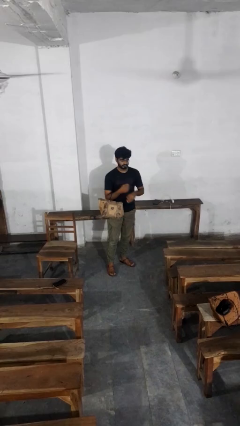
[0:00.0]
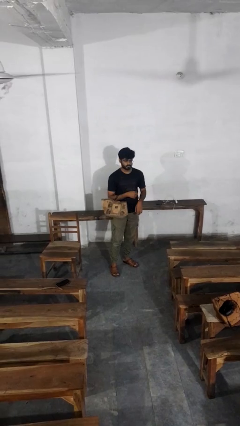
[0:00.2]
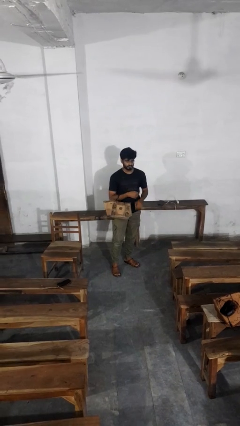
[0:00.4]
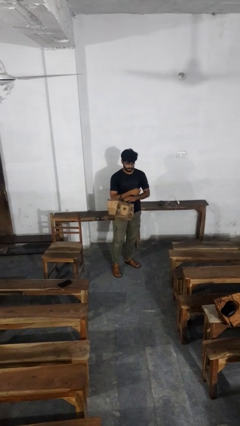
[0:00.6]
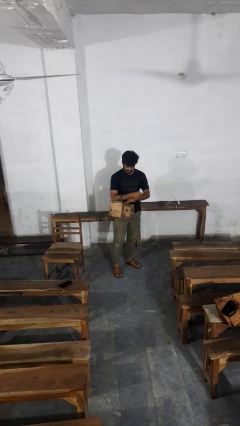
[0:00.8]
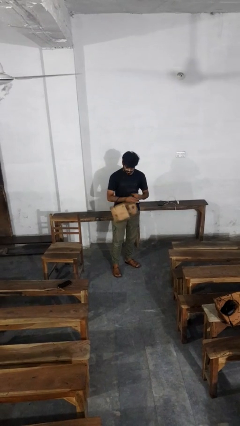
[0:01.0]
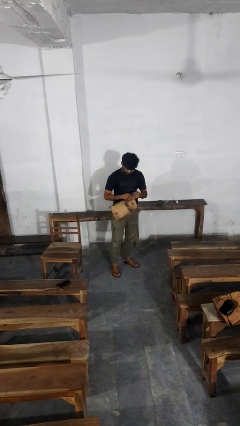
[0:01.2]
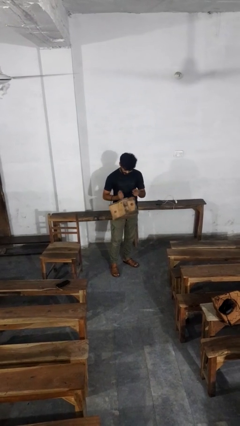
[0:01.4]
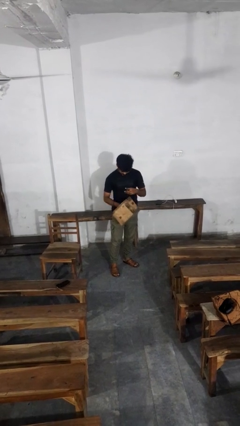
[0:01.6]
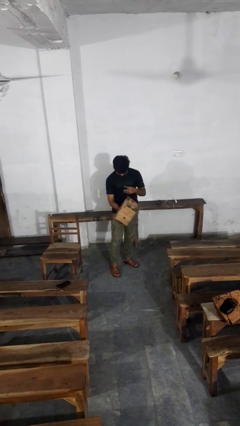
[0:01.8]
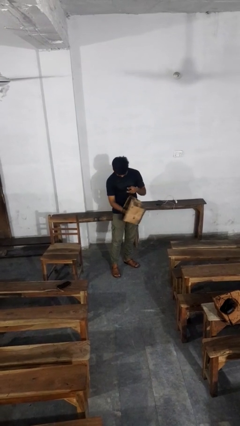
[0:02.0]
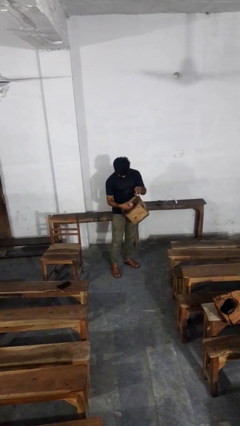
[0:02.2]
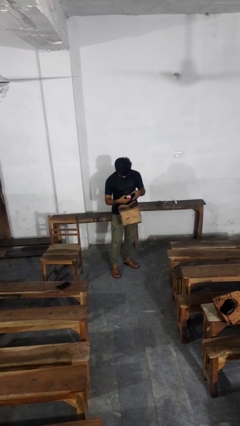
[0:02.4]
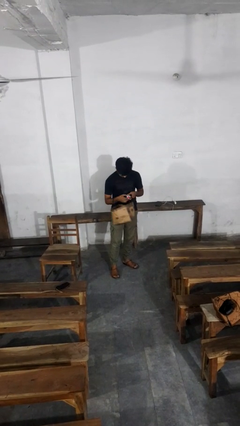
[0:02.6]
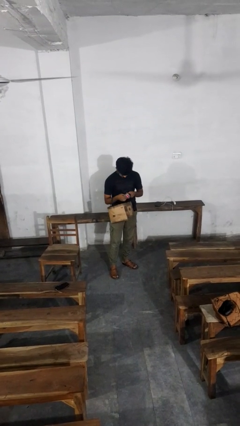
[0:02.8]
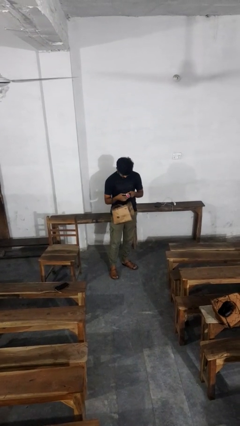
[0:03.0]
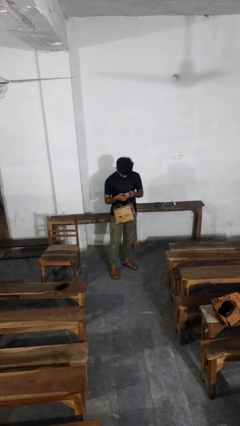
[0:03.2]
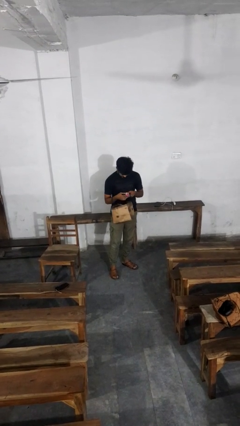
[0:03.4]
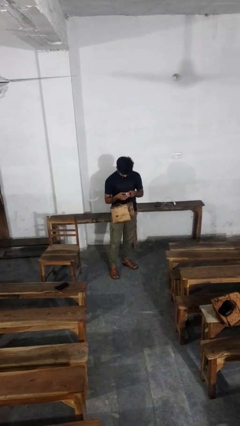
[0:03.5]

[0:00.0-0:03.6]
person searches in purse

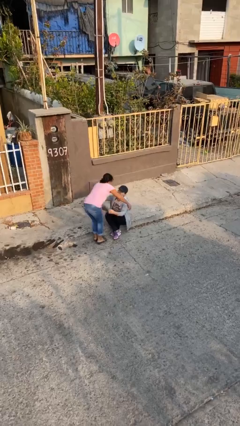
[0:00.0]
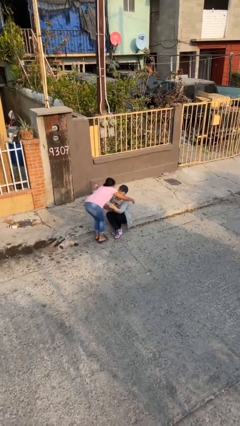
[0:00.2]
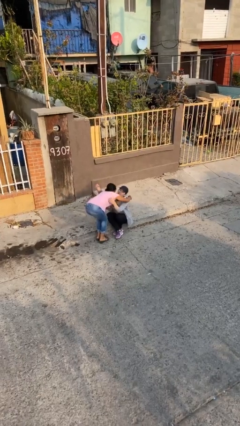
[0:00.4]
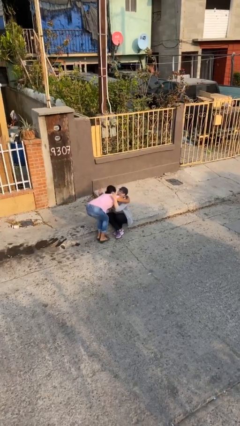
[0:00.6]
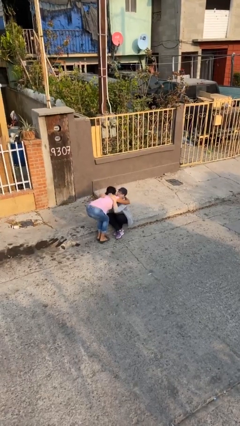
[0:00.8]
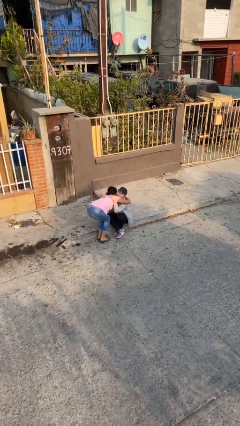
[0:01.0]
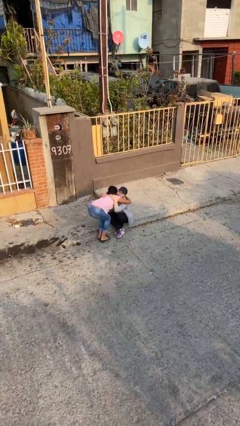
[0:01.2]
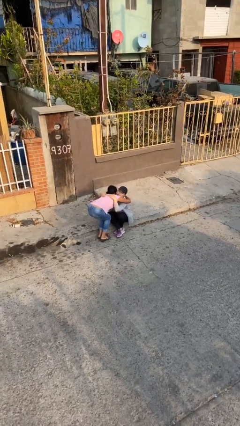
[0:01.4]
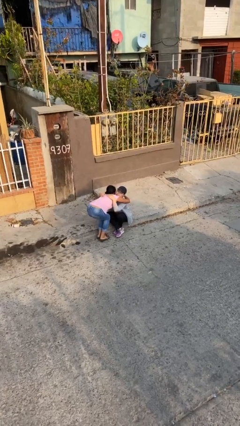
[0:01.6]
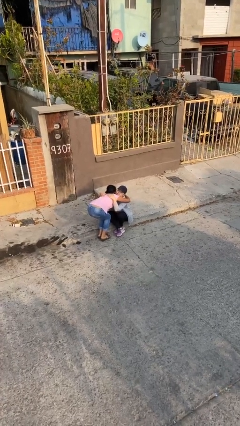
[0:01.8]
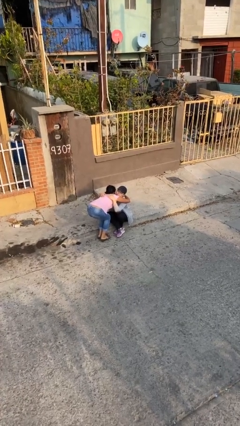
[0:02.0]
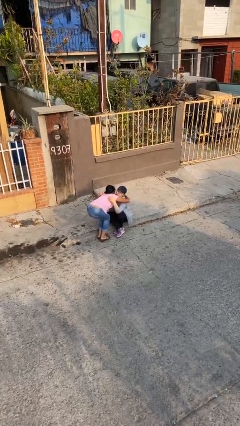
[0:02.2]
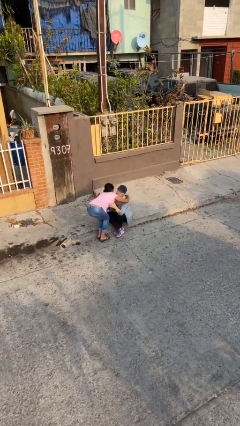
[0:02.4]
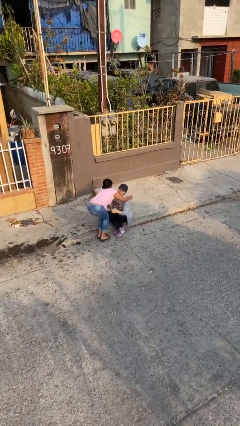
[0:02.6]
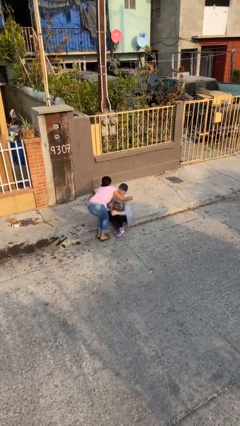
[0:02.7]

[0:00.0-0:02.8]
person embraces person

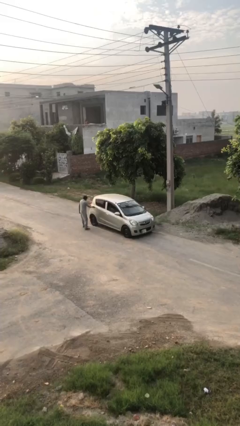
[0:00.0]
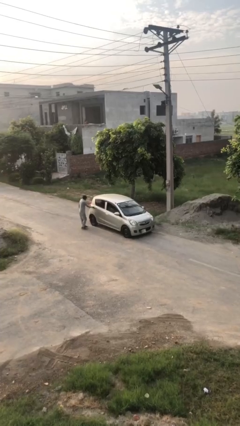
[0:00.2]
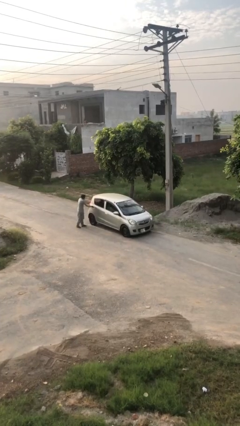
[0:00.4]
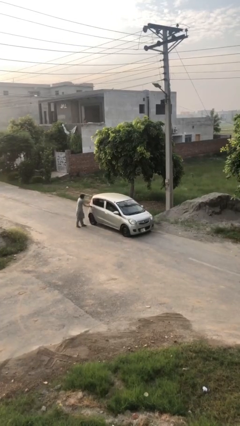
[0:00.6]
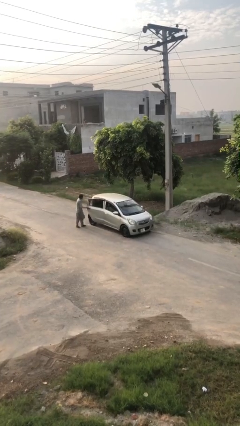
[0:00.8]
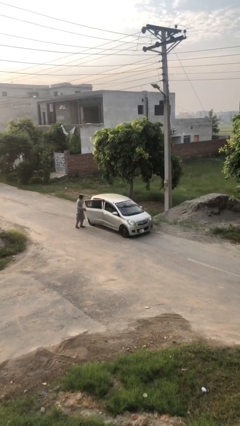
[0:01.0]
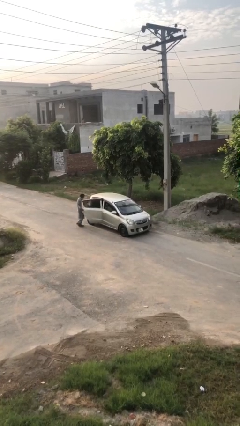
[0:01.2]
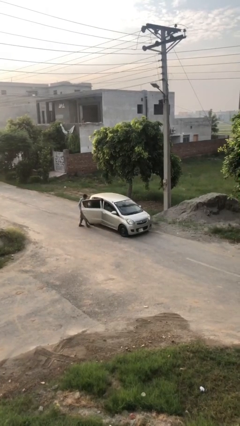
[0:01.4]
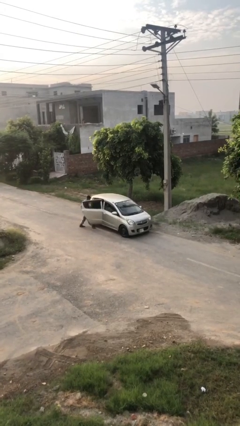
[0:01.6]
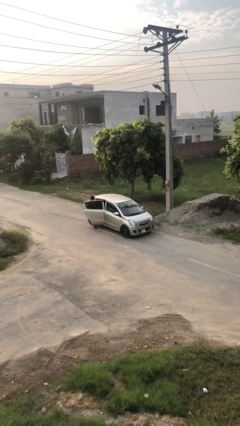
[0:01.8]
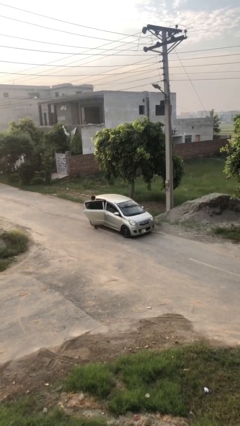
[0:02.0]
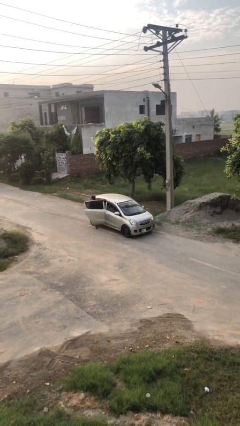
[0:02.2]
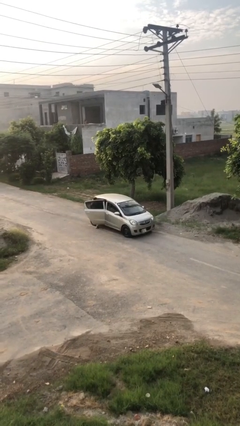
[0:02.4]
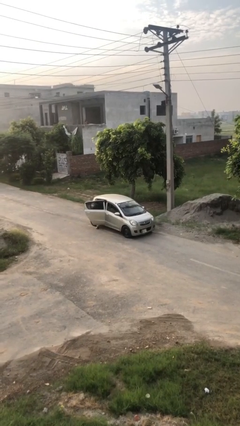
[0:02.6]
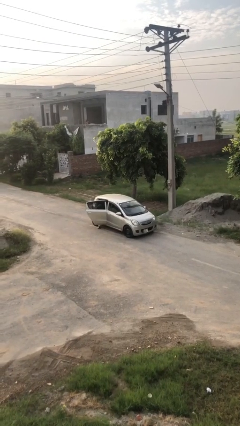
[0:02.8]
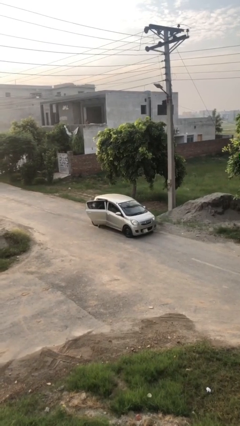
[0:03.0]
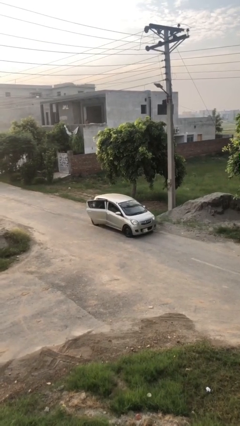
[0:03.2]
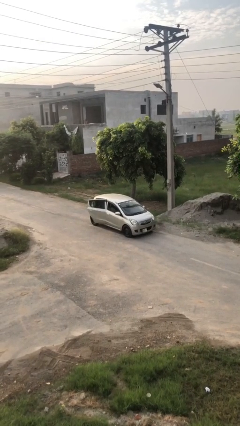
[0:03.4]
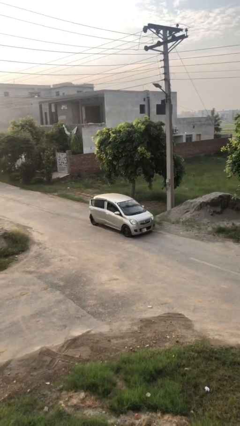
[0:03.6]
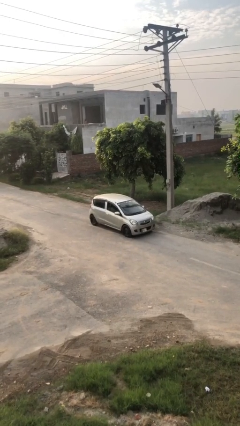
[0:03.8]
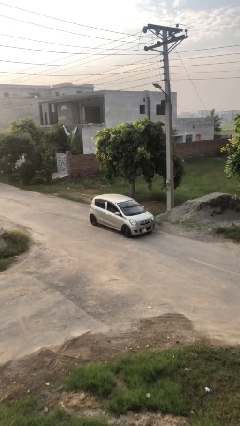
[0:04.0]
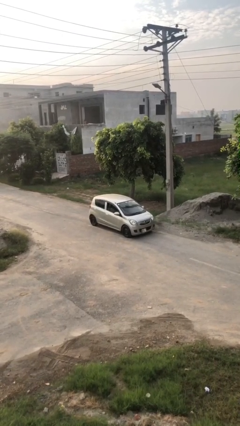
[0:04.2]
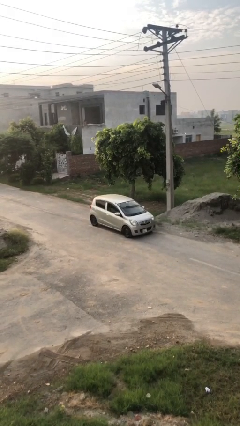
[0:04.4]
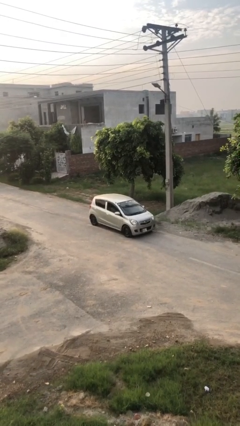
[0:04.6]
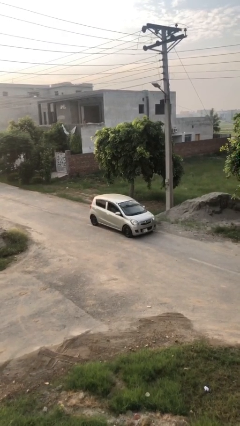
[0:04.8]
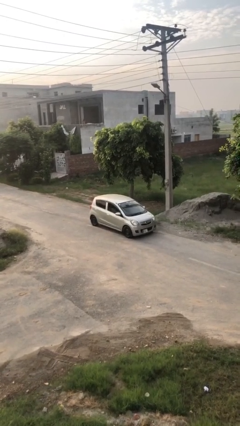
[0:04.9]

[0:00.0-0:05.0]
car picks up person

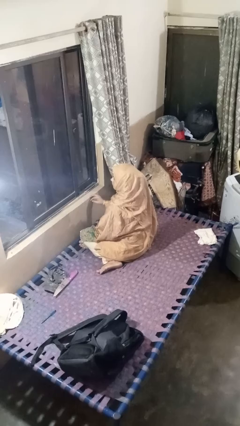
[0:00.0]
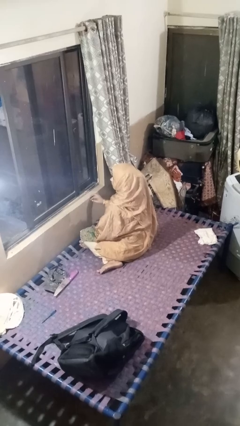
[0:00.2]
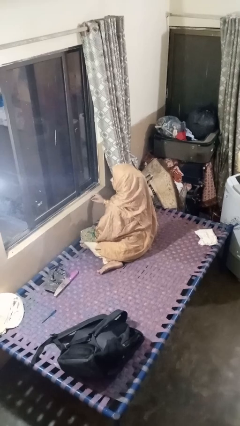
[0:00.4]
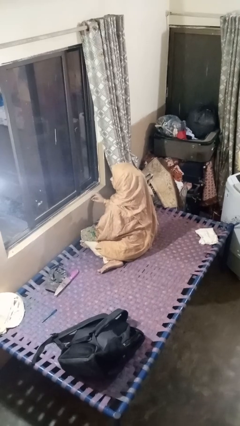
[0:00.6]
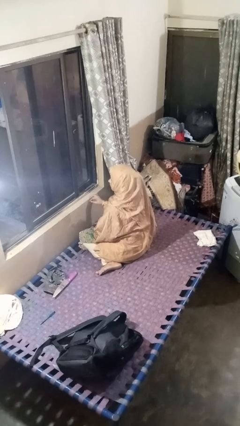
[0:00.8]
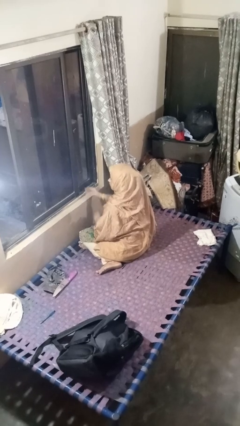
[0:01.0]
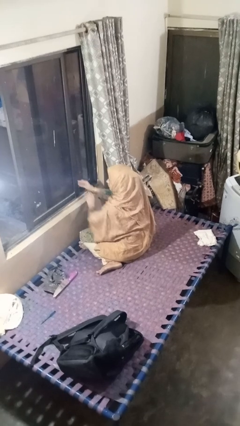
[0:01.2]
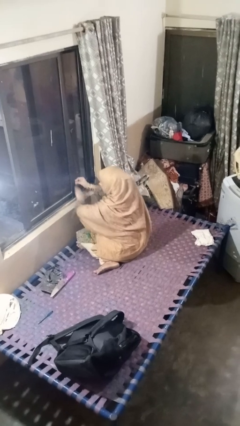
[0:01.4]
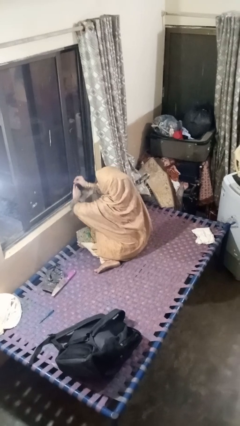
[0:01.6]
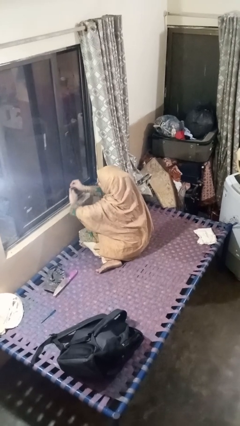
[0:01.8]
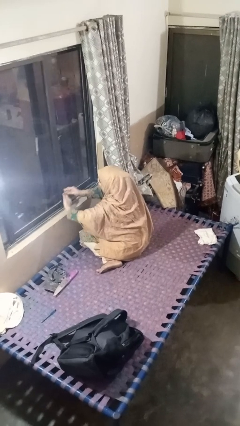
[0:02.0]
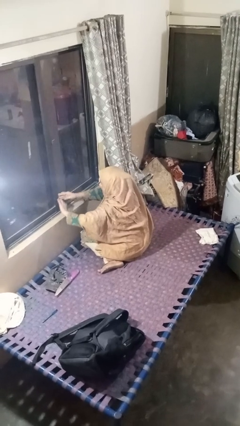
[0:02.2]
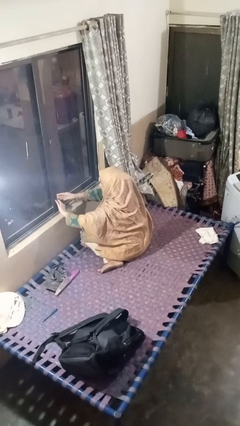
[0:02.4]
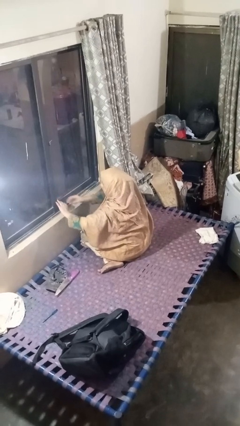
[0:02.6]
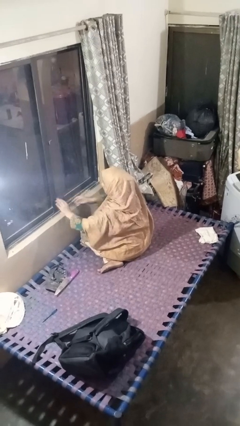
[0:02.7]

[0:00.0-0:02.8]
person closes home window

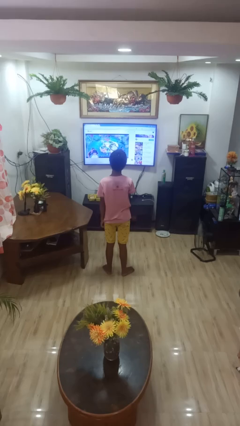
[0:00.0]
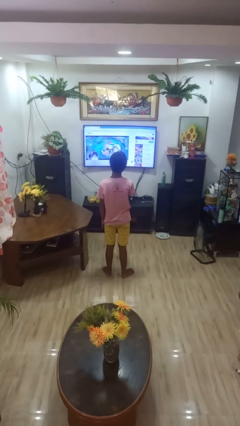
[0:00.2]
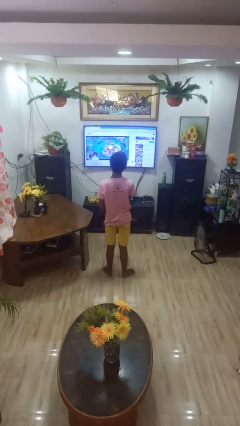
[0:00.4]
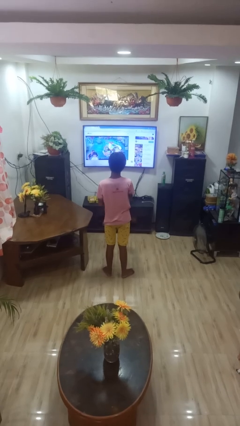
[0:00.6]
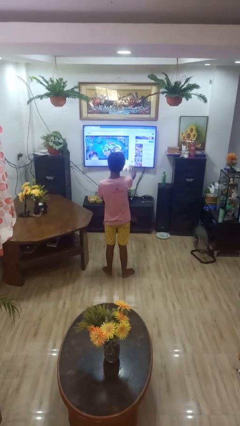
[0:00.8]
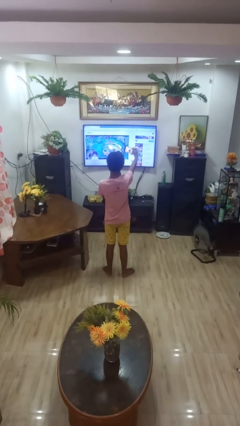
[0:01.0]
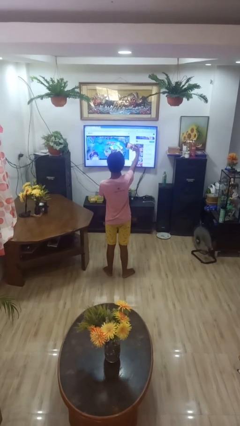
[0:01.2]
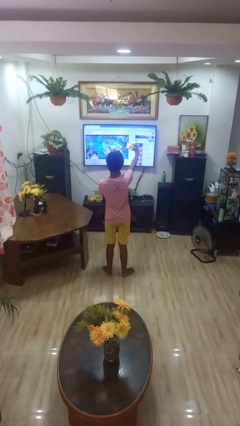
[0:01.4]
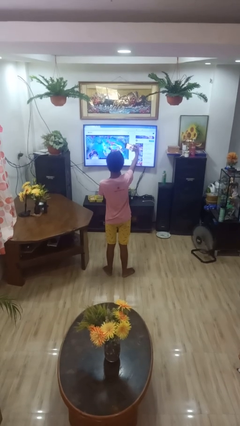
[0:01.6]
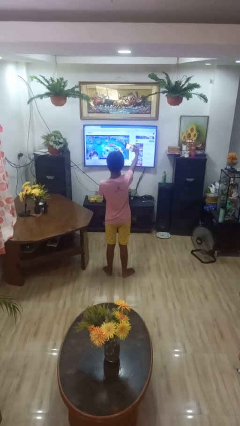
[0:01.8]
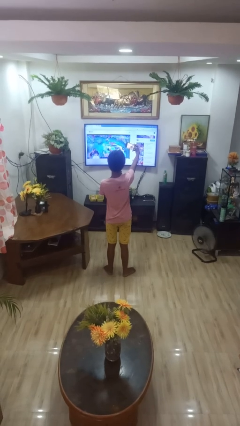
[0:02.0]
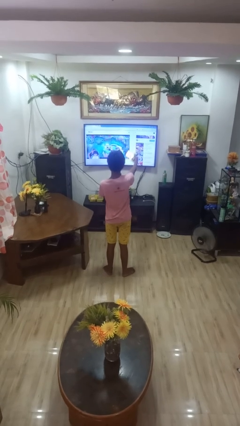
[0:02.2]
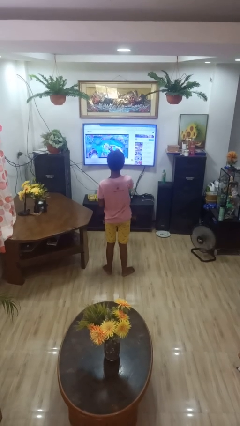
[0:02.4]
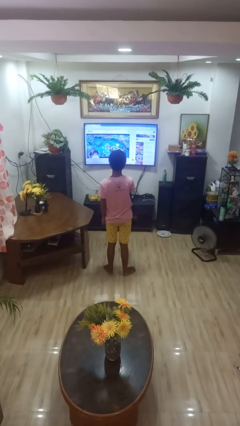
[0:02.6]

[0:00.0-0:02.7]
person takes selfie

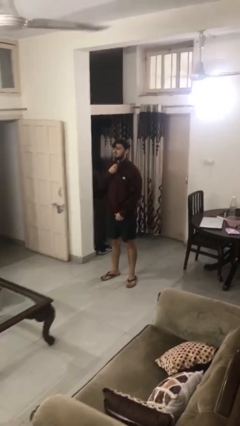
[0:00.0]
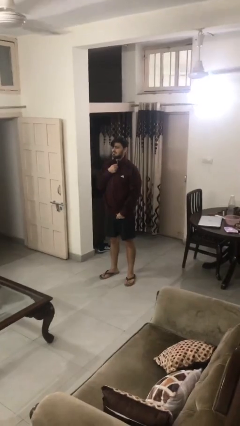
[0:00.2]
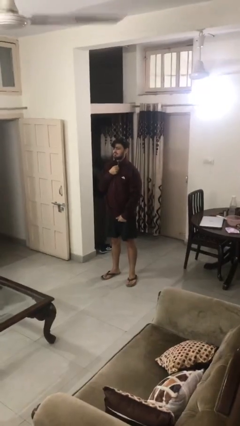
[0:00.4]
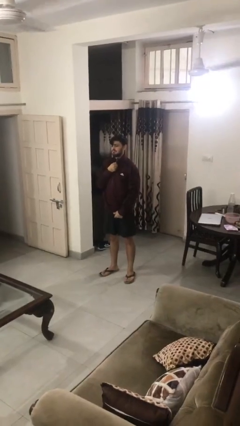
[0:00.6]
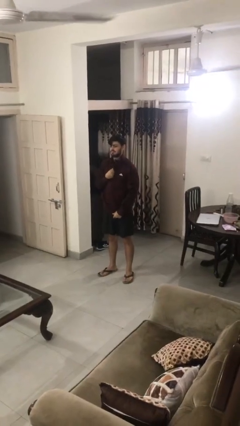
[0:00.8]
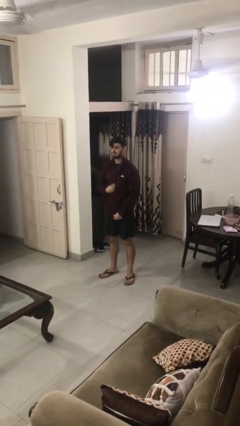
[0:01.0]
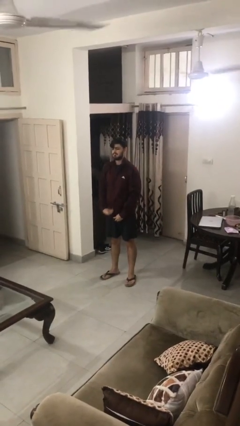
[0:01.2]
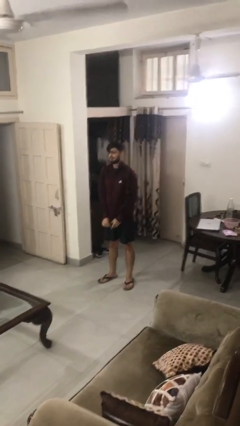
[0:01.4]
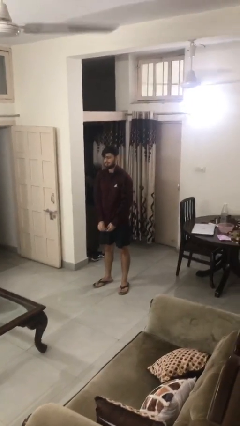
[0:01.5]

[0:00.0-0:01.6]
person unzips jacket
